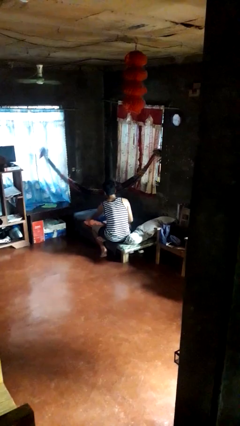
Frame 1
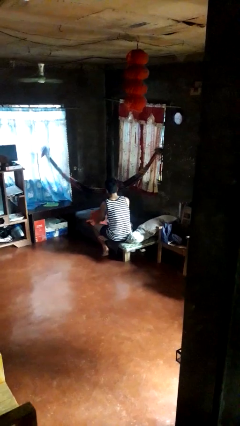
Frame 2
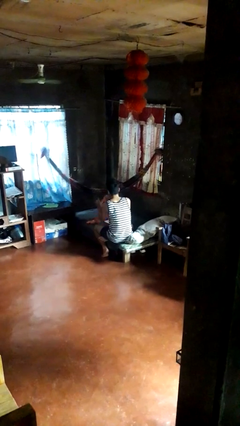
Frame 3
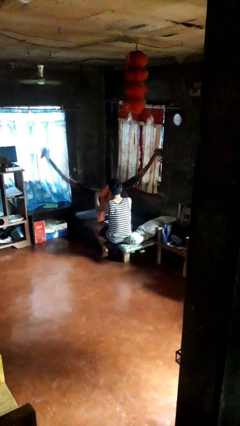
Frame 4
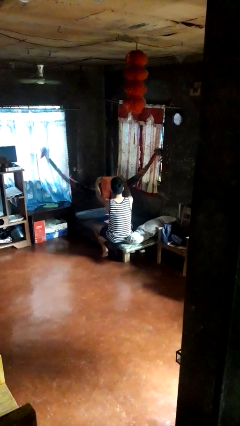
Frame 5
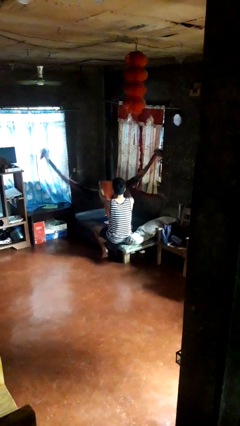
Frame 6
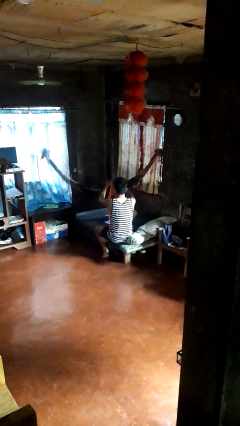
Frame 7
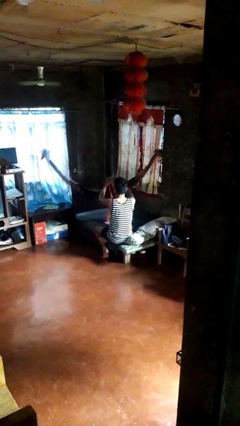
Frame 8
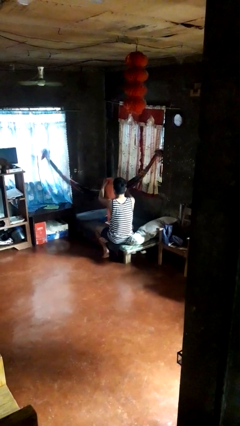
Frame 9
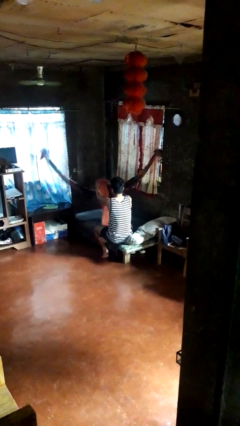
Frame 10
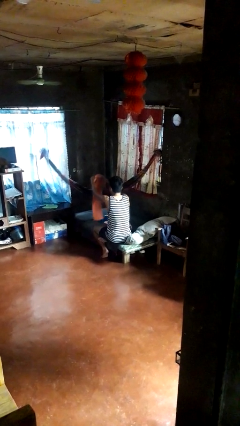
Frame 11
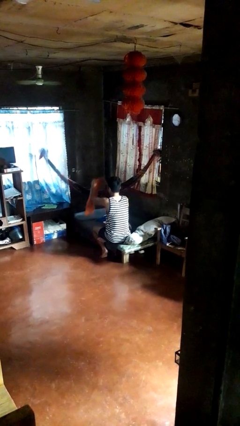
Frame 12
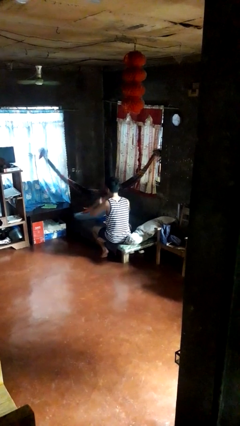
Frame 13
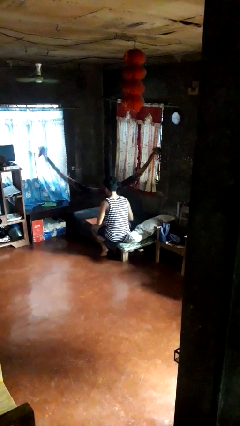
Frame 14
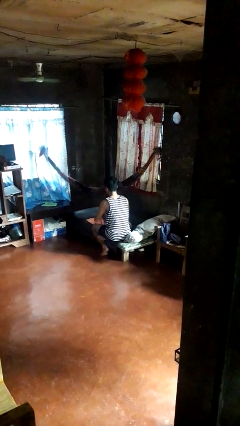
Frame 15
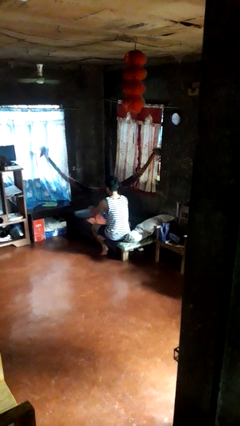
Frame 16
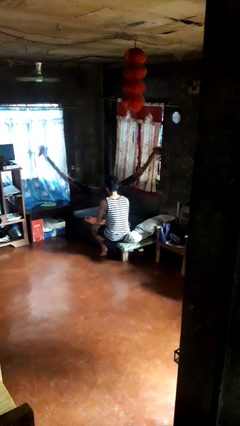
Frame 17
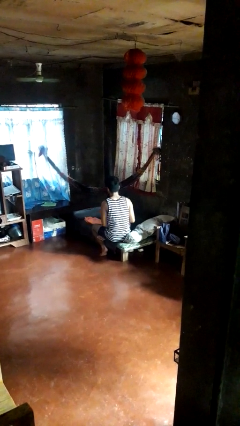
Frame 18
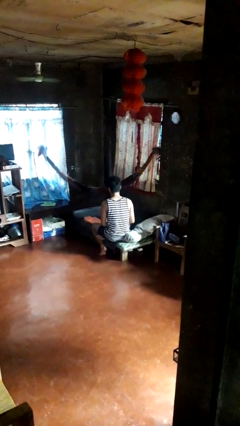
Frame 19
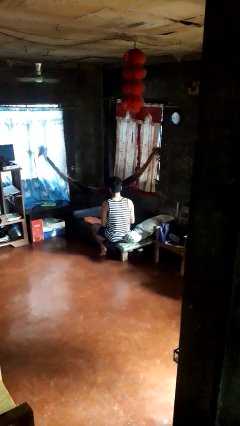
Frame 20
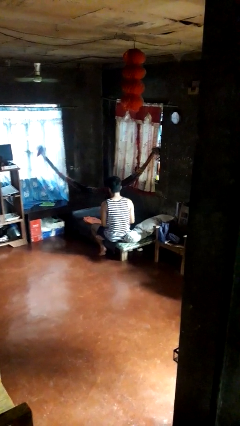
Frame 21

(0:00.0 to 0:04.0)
person folds pants

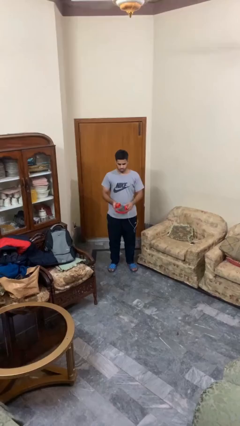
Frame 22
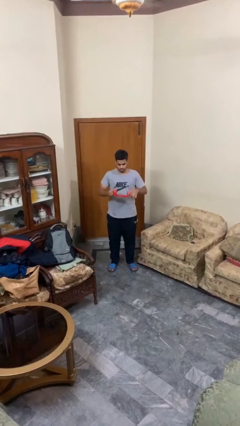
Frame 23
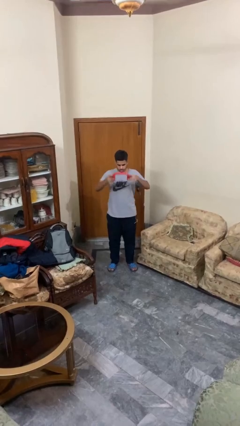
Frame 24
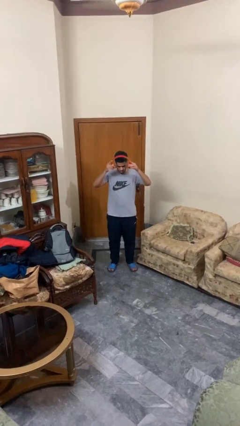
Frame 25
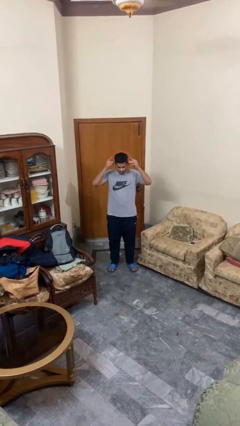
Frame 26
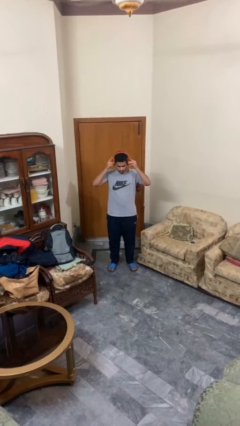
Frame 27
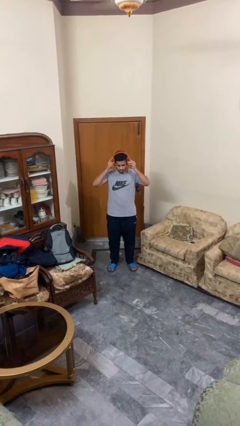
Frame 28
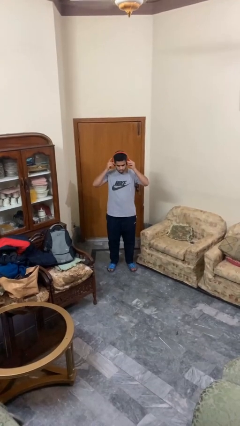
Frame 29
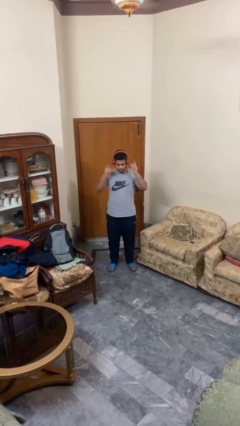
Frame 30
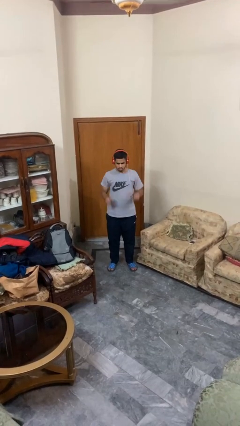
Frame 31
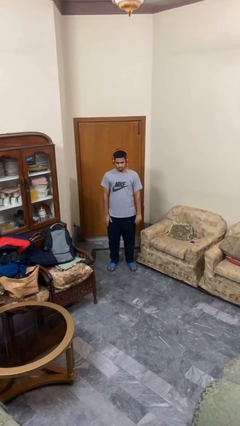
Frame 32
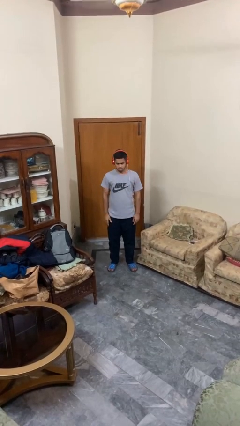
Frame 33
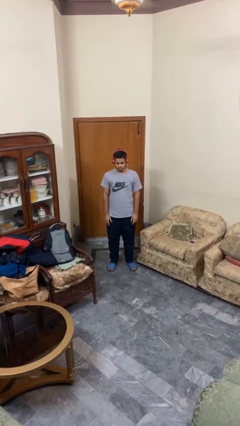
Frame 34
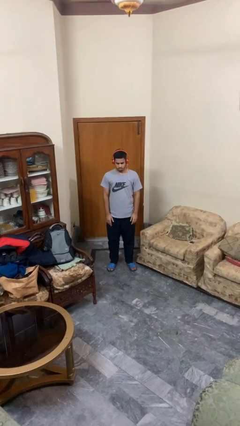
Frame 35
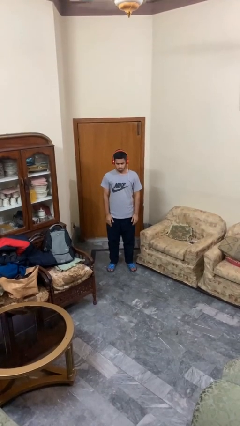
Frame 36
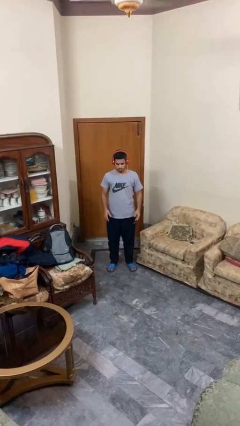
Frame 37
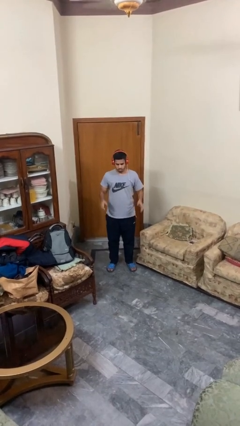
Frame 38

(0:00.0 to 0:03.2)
person puts on headphones

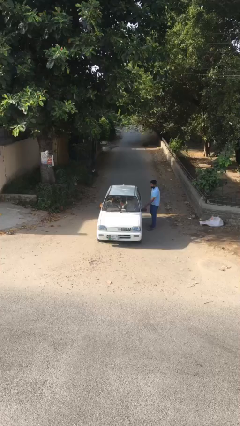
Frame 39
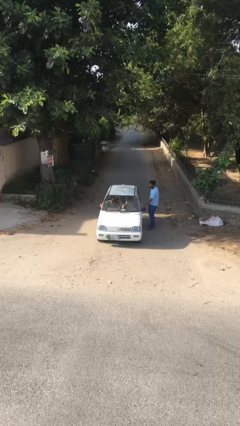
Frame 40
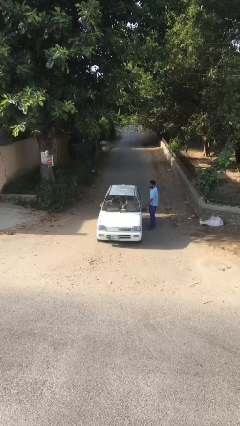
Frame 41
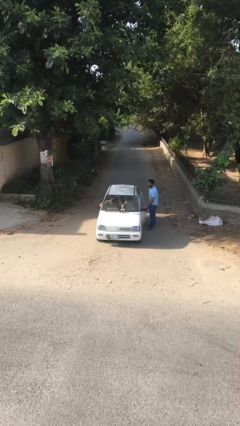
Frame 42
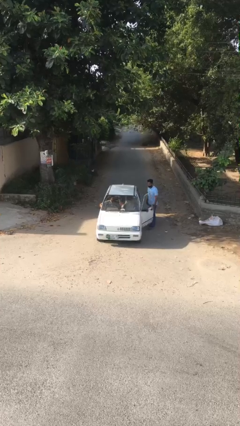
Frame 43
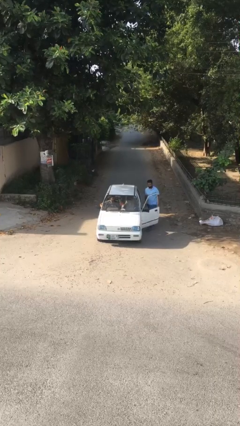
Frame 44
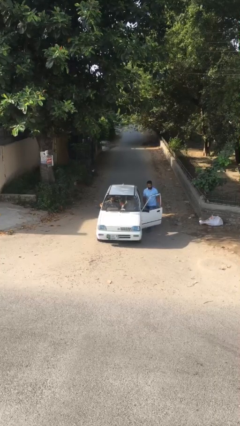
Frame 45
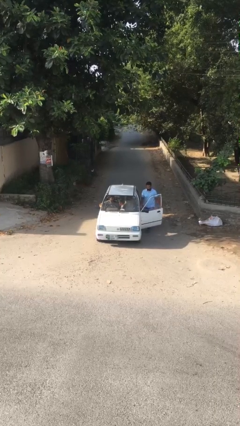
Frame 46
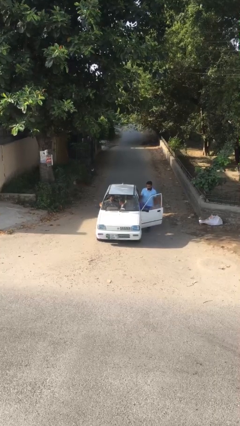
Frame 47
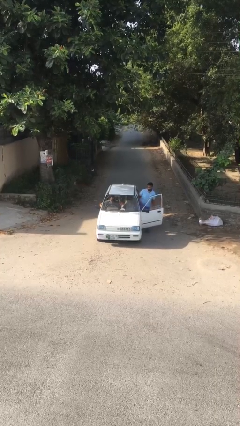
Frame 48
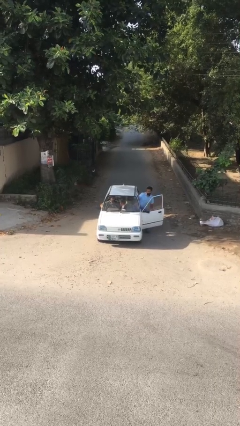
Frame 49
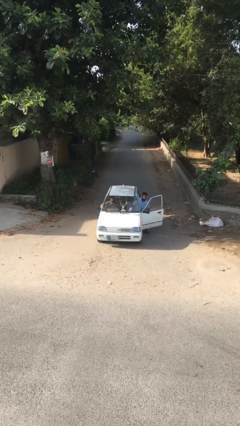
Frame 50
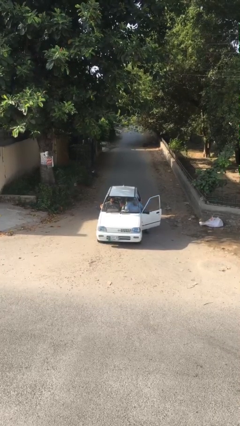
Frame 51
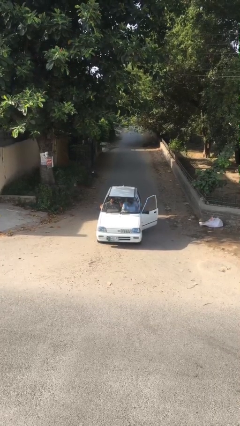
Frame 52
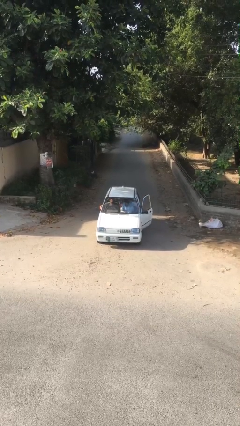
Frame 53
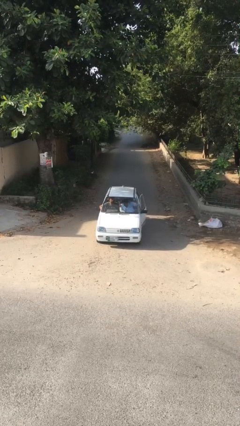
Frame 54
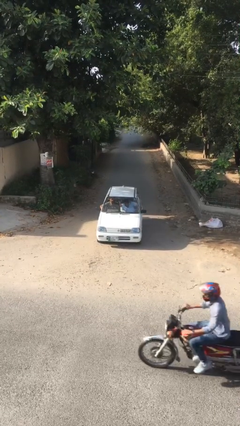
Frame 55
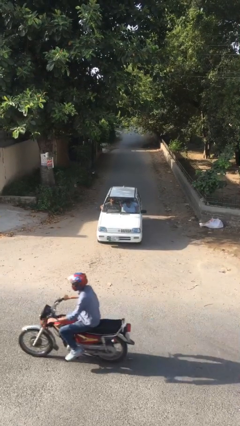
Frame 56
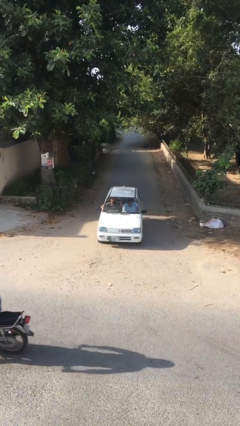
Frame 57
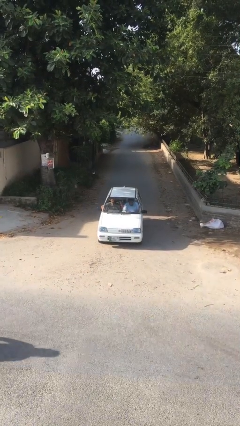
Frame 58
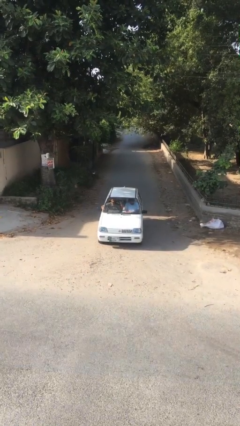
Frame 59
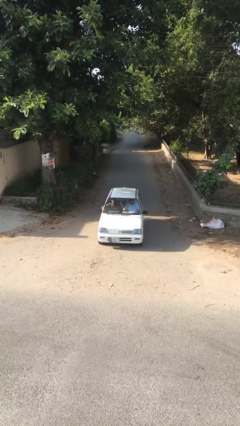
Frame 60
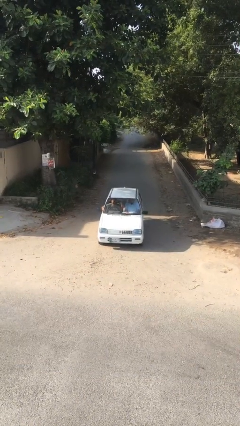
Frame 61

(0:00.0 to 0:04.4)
car picks up person

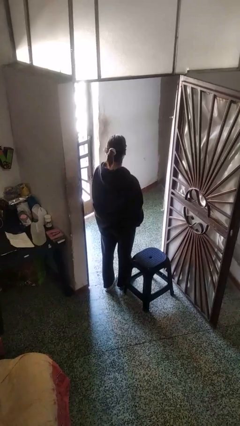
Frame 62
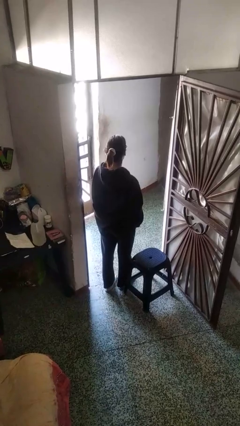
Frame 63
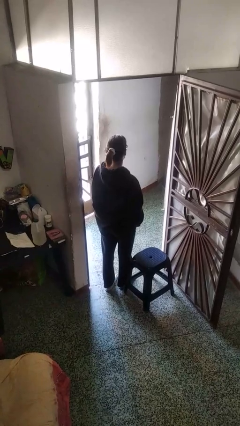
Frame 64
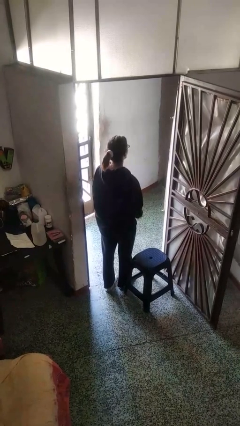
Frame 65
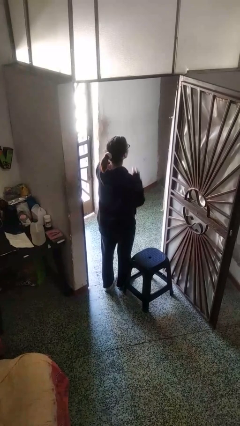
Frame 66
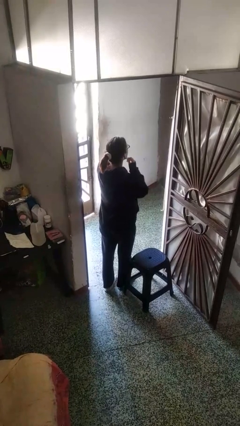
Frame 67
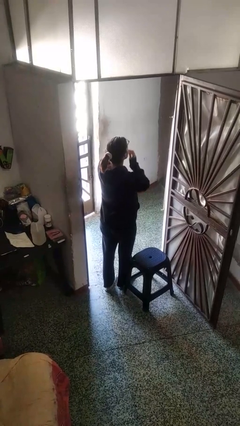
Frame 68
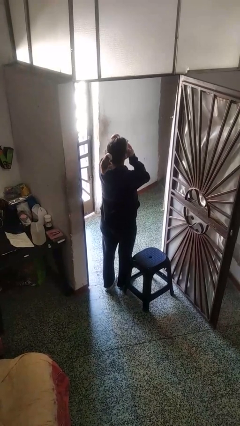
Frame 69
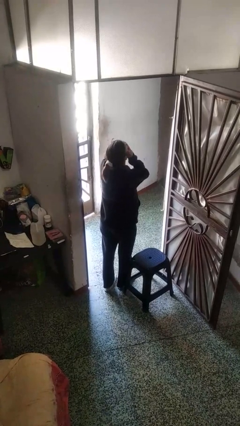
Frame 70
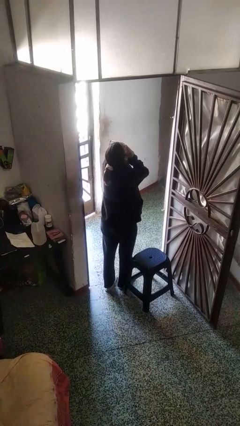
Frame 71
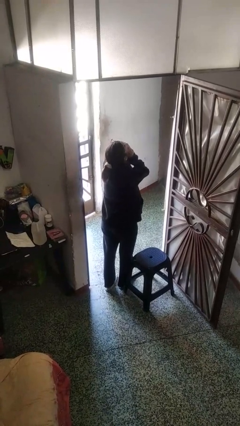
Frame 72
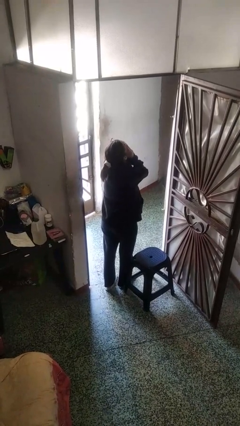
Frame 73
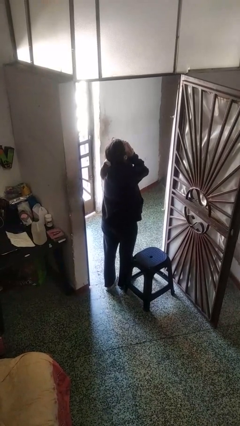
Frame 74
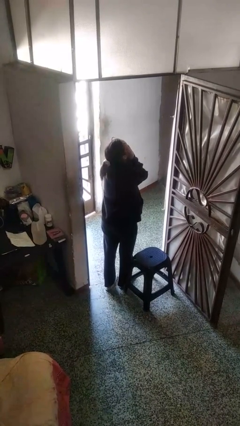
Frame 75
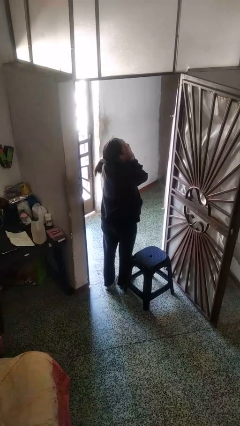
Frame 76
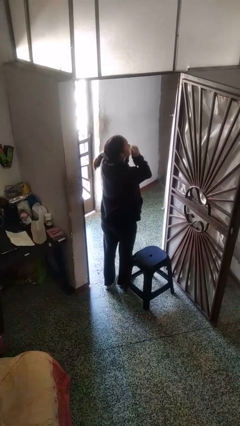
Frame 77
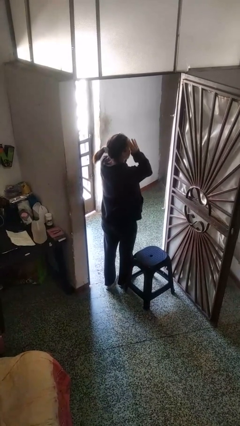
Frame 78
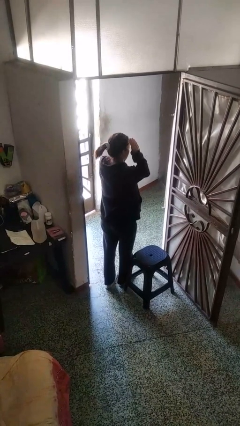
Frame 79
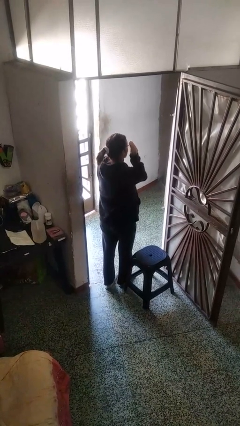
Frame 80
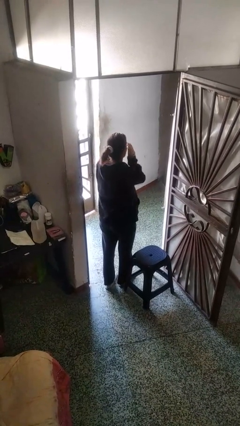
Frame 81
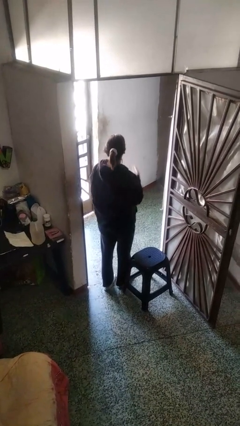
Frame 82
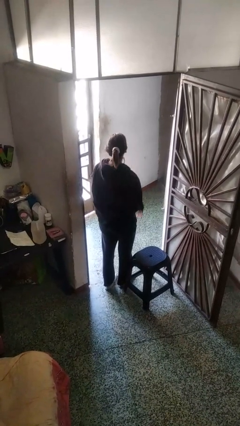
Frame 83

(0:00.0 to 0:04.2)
person rubs eyes

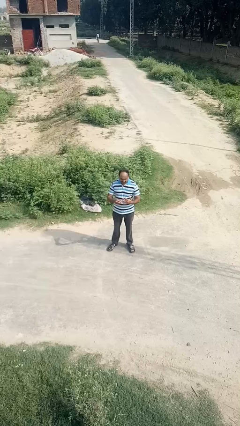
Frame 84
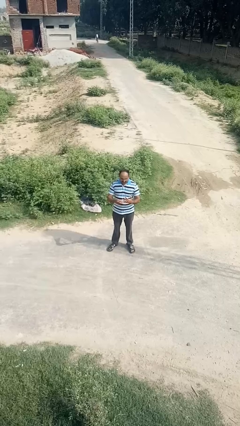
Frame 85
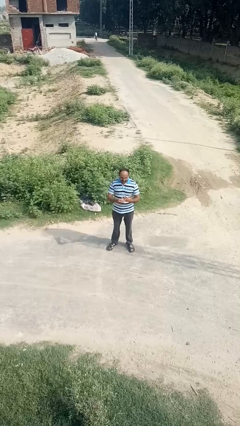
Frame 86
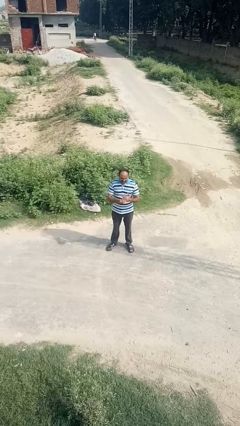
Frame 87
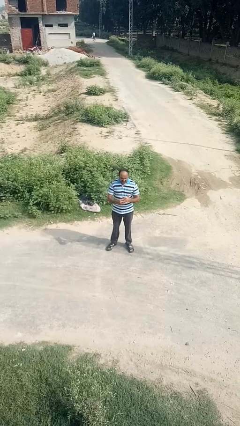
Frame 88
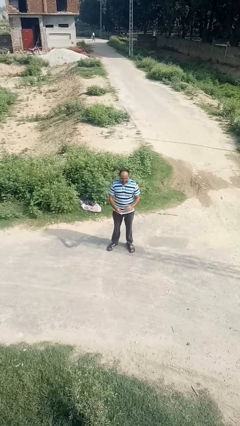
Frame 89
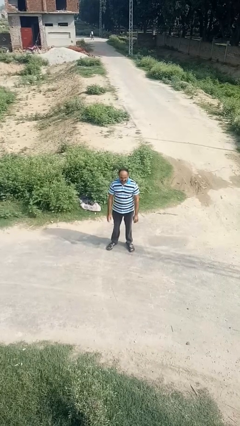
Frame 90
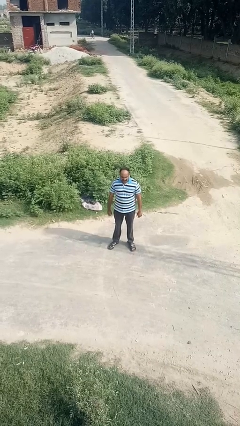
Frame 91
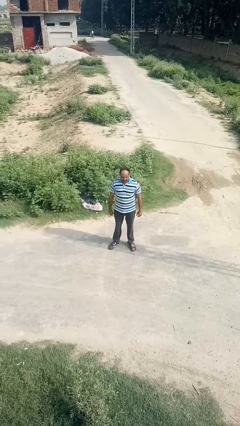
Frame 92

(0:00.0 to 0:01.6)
person puts on ring

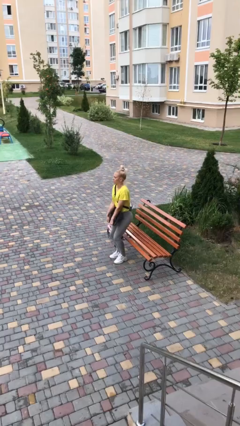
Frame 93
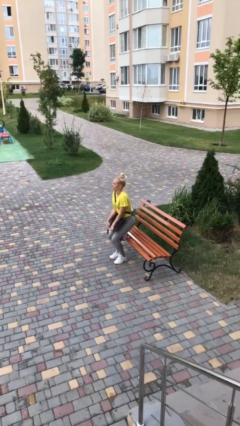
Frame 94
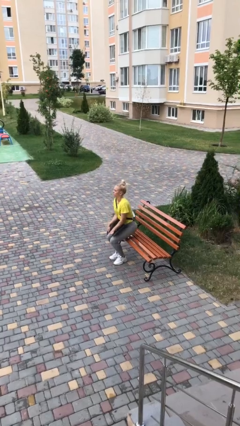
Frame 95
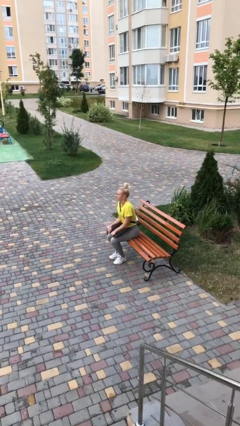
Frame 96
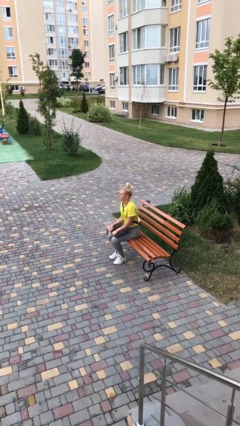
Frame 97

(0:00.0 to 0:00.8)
person sits down
